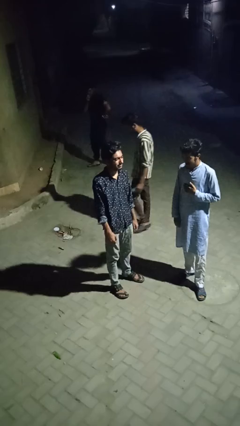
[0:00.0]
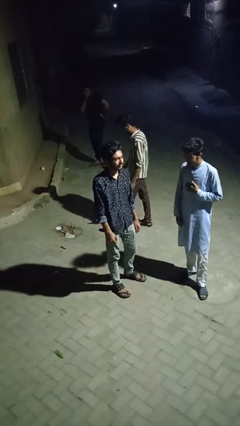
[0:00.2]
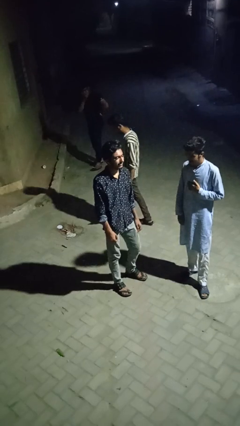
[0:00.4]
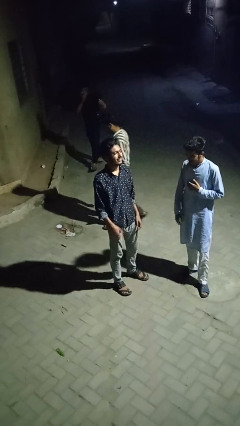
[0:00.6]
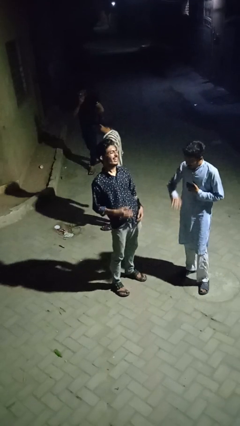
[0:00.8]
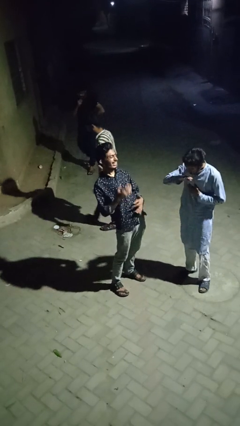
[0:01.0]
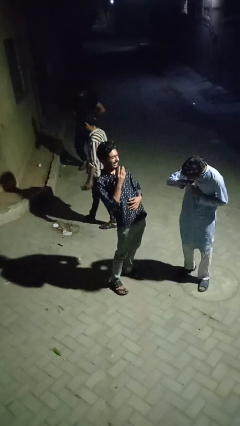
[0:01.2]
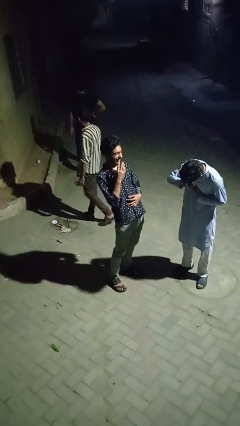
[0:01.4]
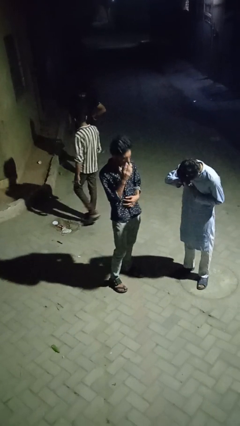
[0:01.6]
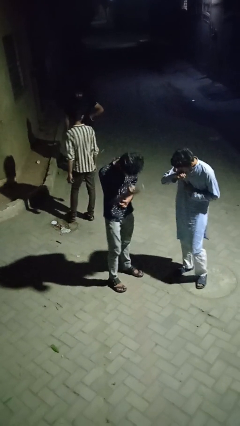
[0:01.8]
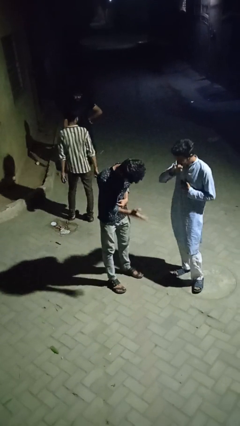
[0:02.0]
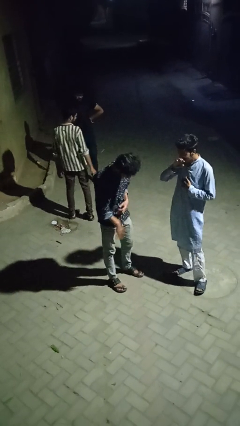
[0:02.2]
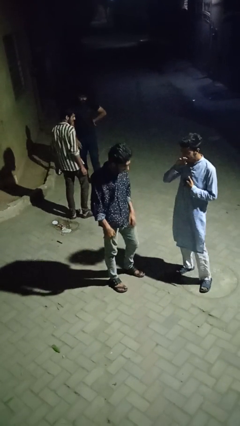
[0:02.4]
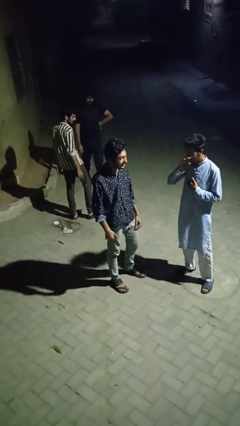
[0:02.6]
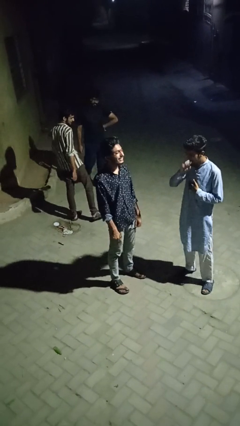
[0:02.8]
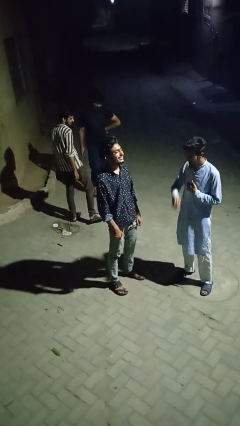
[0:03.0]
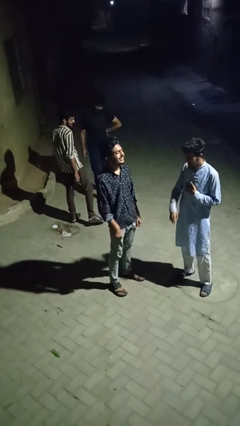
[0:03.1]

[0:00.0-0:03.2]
person laughs with person

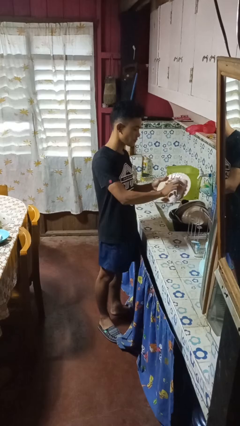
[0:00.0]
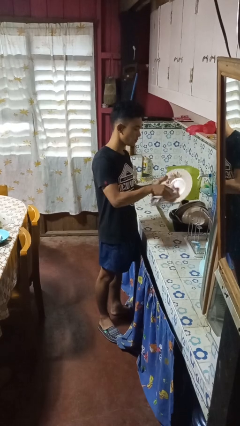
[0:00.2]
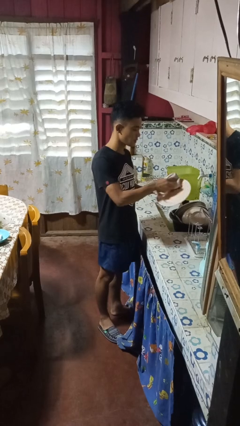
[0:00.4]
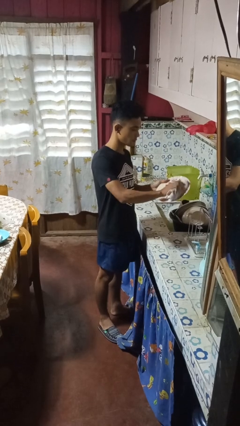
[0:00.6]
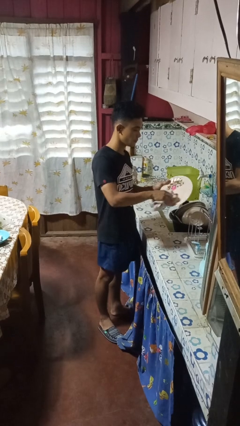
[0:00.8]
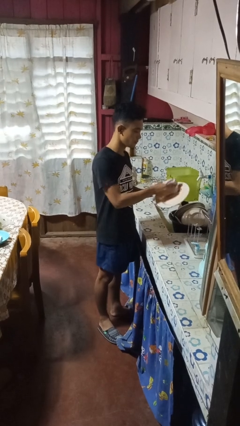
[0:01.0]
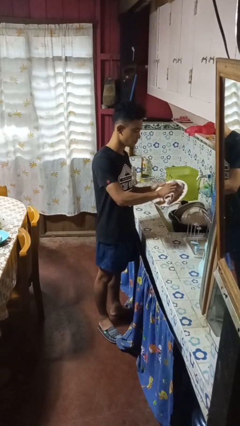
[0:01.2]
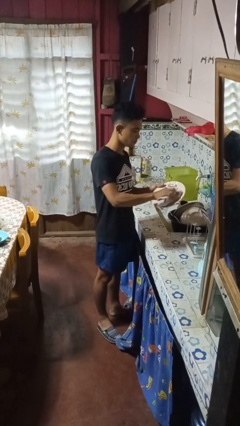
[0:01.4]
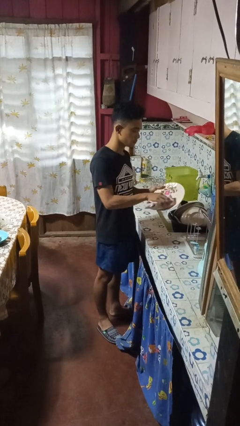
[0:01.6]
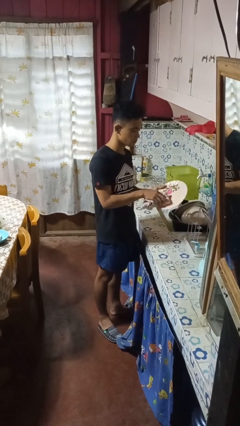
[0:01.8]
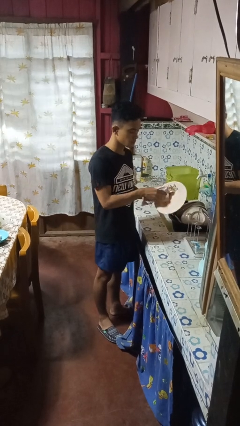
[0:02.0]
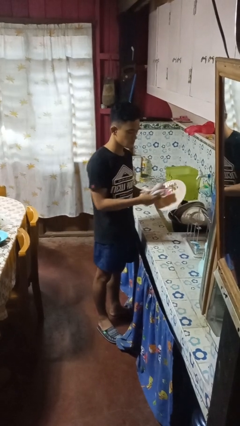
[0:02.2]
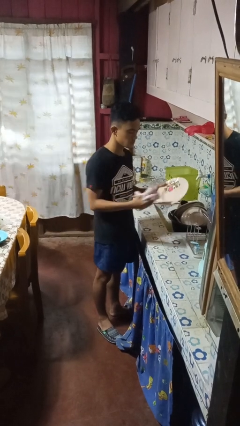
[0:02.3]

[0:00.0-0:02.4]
person dries dish

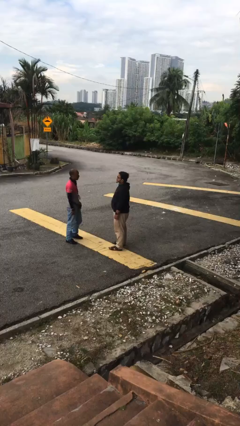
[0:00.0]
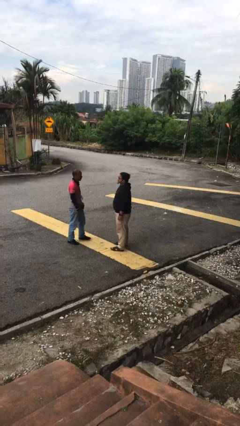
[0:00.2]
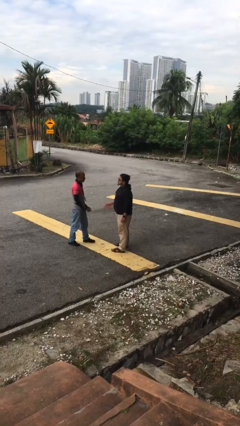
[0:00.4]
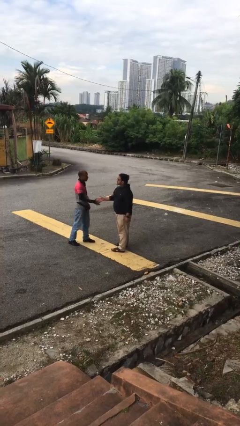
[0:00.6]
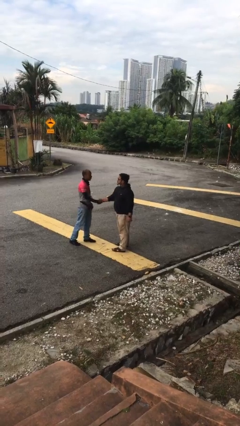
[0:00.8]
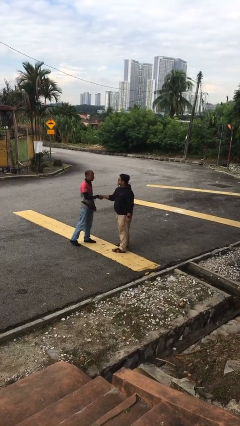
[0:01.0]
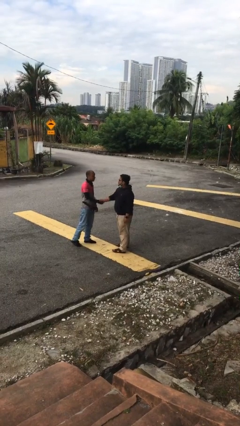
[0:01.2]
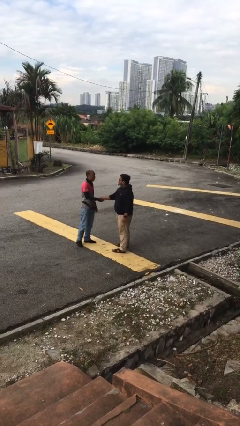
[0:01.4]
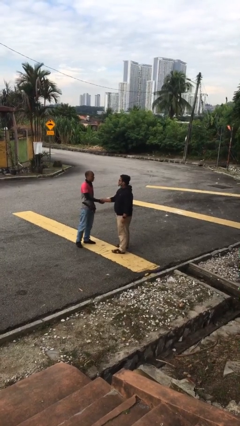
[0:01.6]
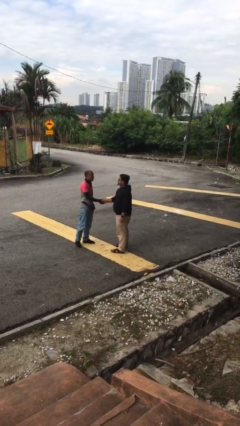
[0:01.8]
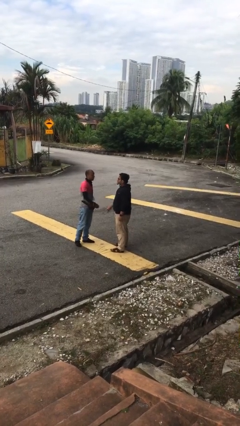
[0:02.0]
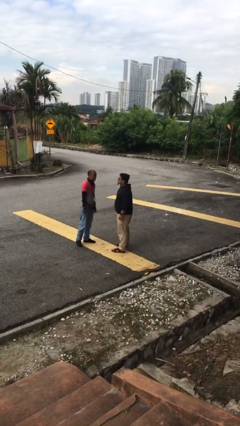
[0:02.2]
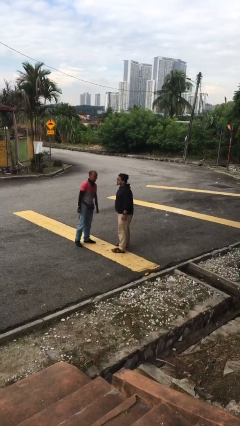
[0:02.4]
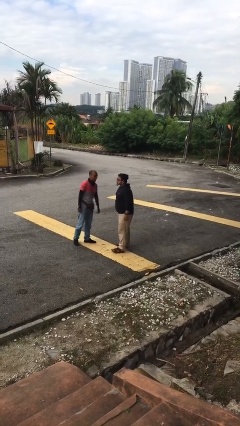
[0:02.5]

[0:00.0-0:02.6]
person shakes hand

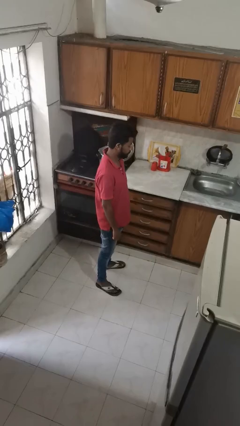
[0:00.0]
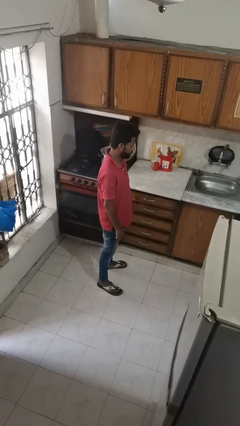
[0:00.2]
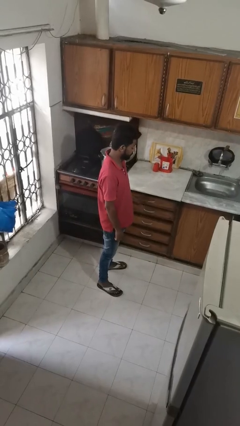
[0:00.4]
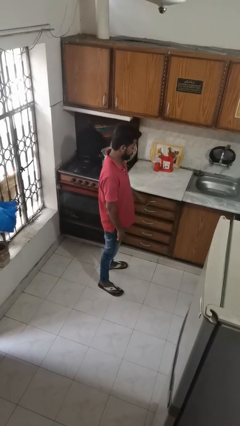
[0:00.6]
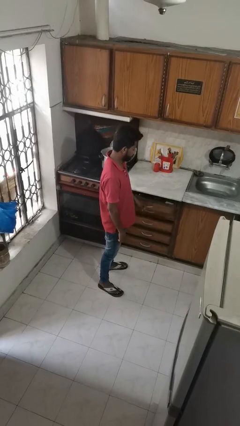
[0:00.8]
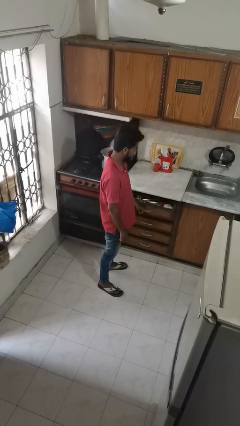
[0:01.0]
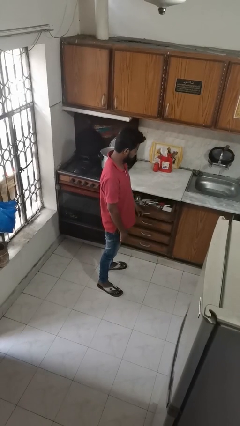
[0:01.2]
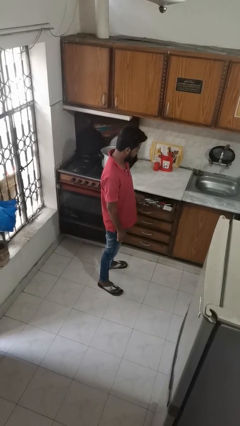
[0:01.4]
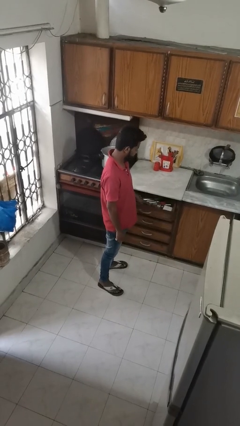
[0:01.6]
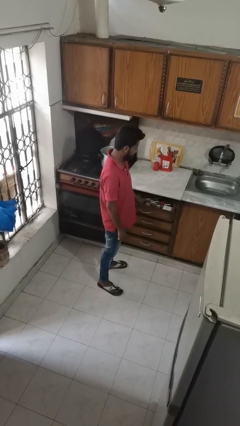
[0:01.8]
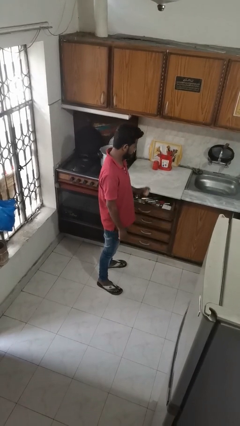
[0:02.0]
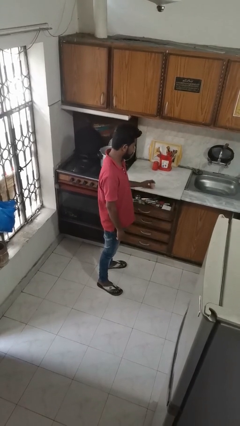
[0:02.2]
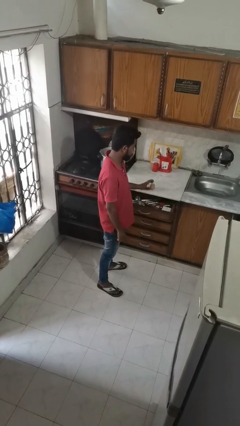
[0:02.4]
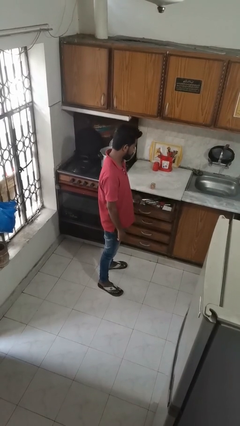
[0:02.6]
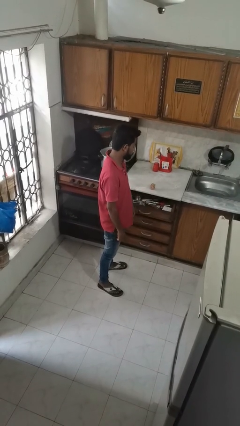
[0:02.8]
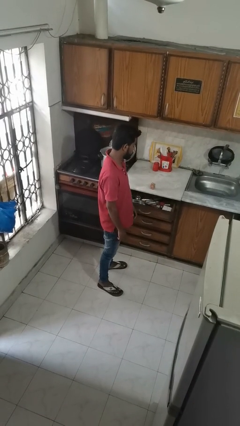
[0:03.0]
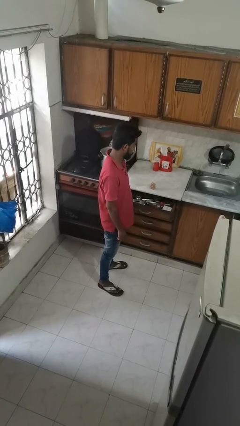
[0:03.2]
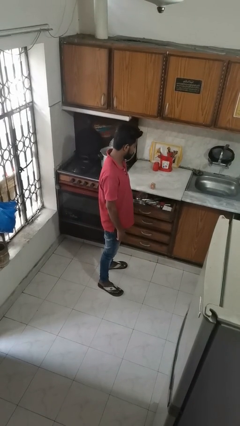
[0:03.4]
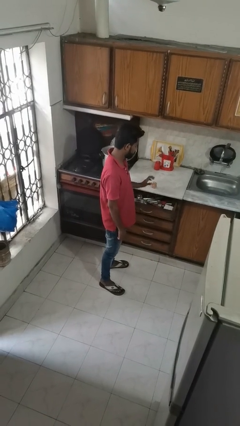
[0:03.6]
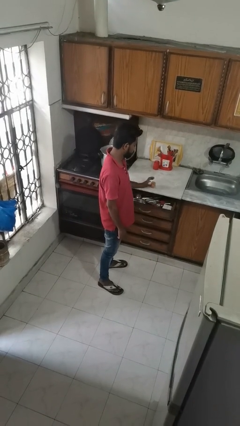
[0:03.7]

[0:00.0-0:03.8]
person takes object from kitchen drawer

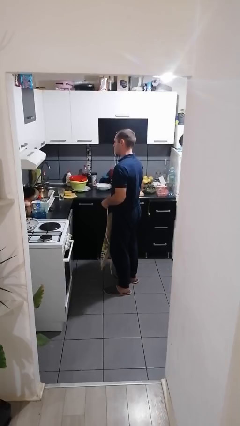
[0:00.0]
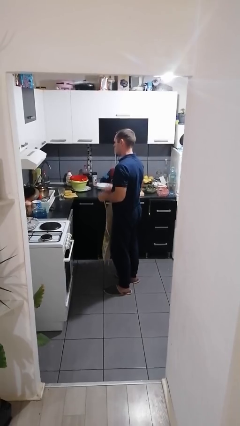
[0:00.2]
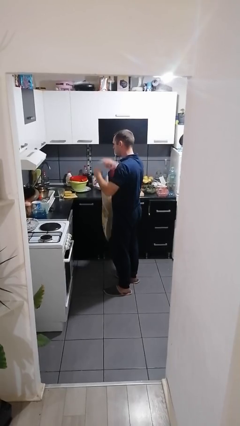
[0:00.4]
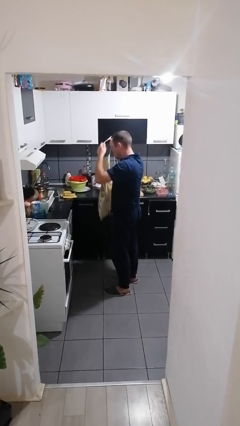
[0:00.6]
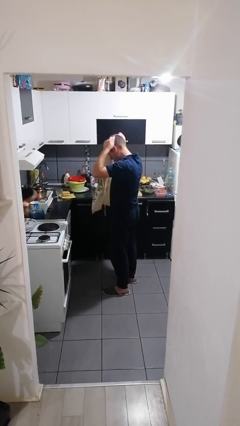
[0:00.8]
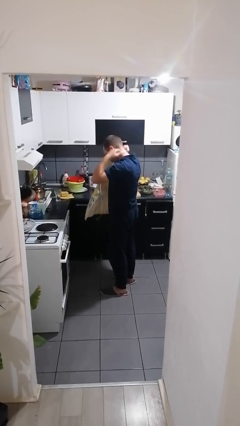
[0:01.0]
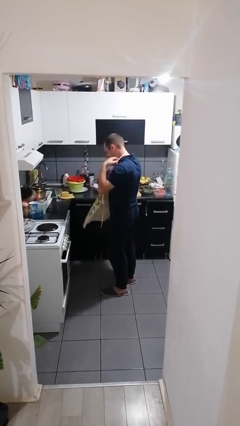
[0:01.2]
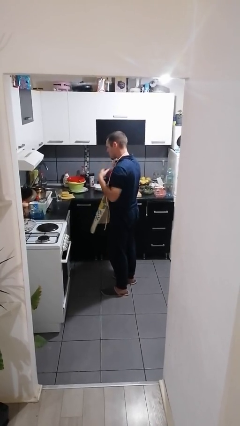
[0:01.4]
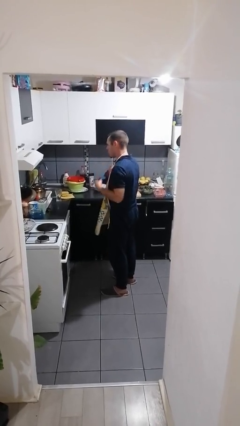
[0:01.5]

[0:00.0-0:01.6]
person puts on apron

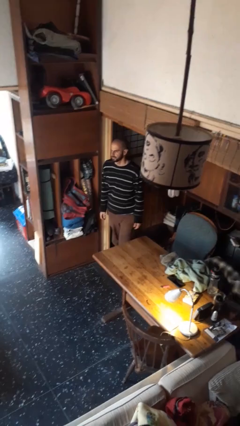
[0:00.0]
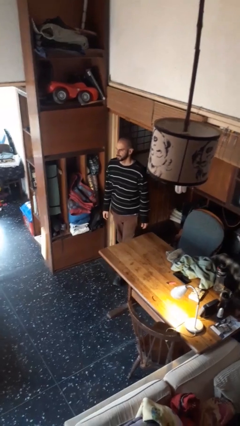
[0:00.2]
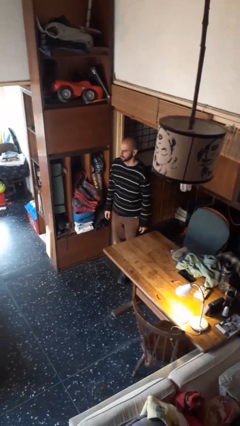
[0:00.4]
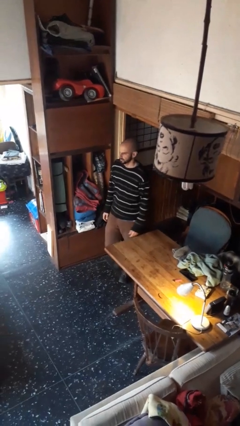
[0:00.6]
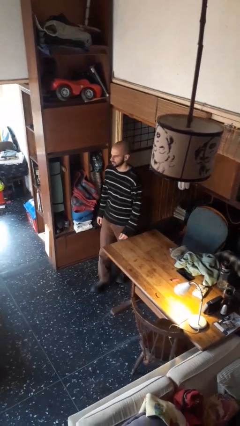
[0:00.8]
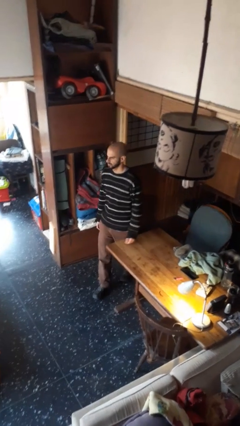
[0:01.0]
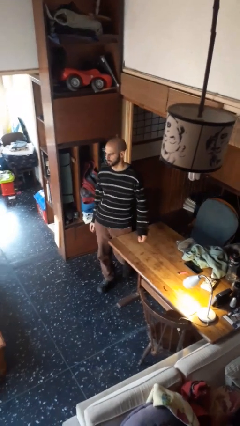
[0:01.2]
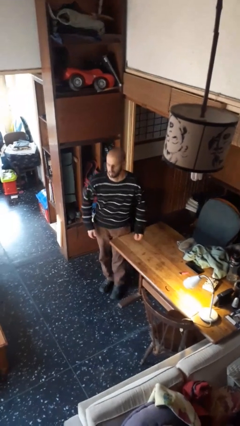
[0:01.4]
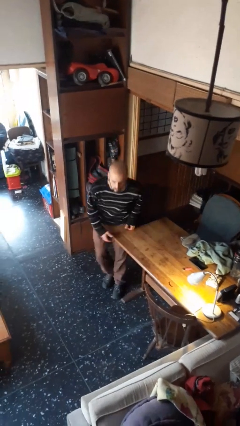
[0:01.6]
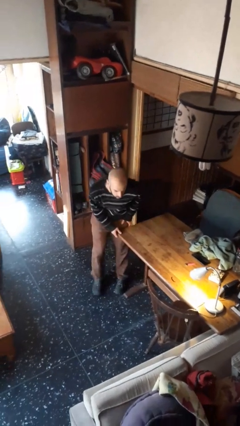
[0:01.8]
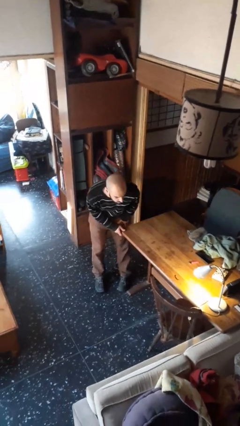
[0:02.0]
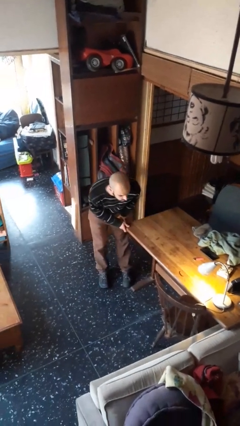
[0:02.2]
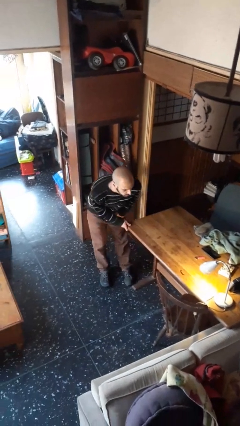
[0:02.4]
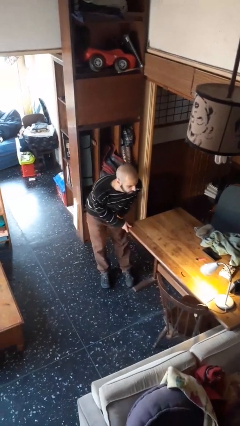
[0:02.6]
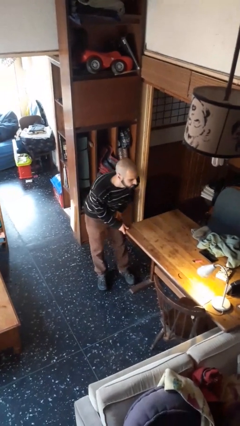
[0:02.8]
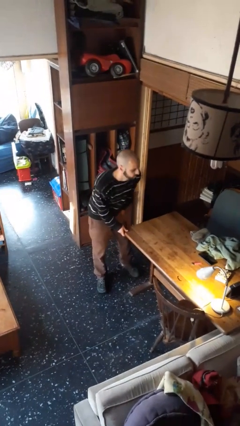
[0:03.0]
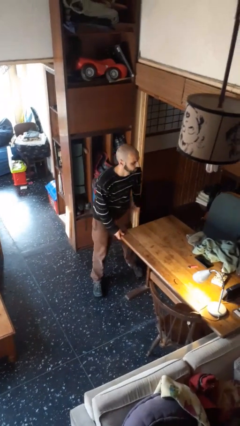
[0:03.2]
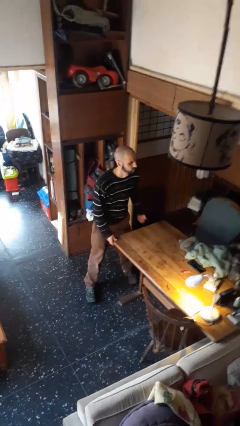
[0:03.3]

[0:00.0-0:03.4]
person bumps into table

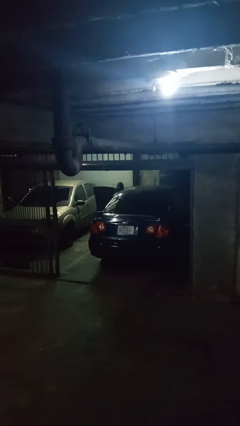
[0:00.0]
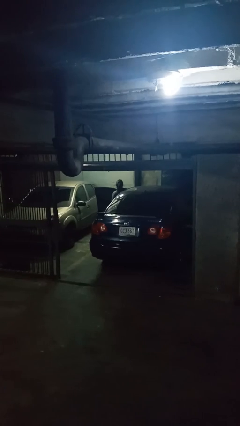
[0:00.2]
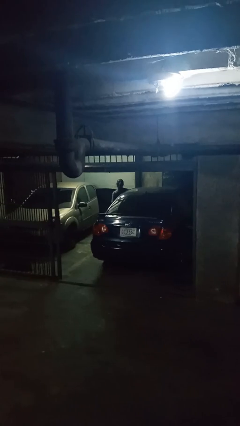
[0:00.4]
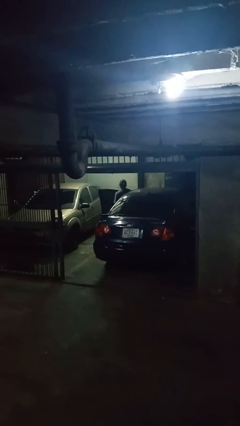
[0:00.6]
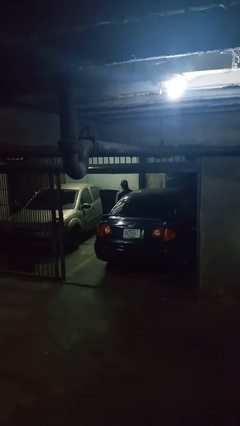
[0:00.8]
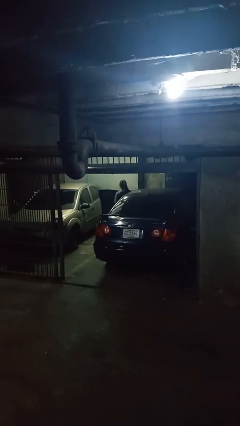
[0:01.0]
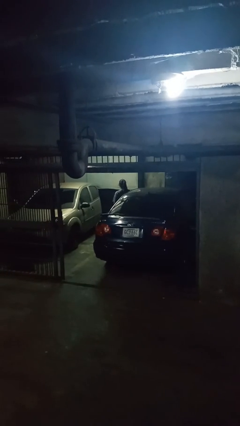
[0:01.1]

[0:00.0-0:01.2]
person exits car
